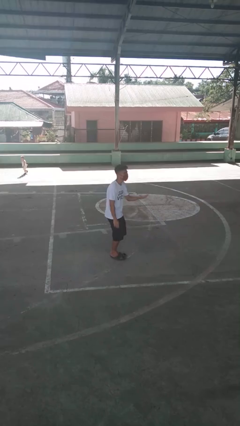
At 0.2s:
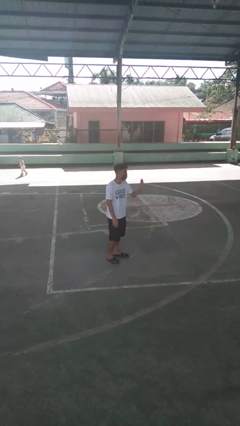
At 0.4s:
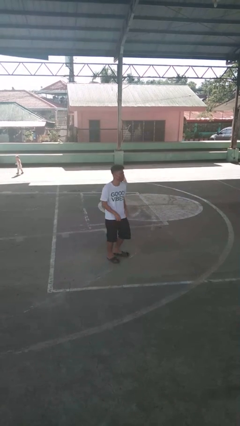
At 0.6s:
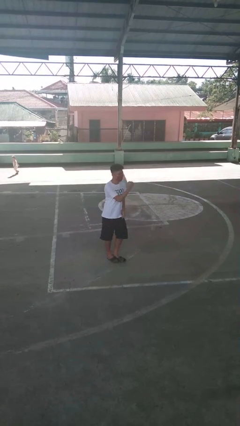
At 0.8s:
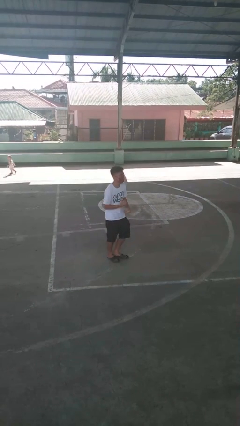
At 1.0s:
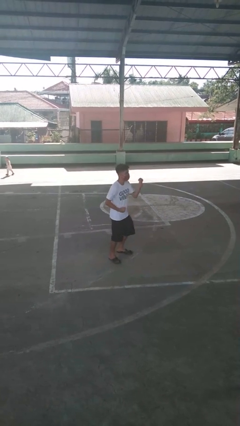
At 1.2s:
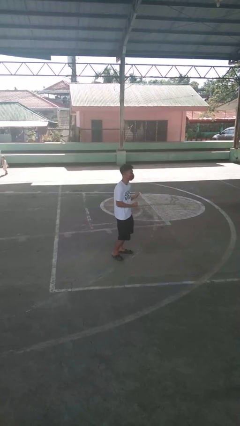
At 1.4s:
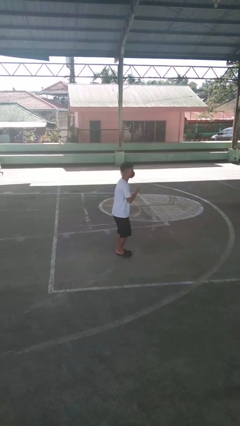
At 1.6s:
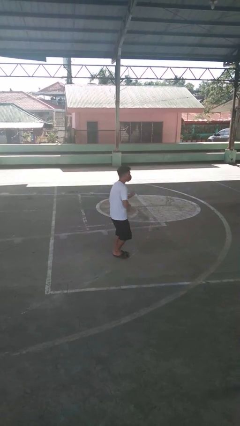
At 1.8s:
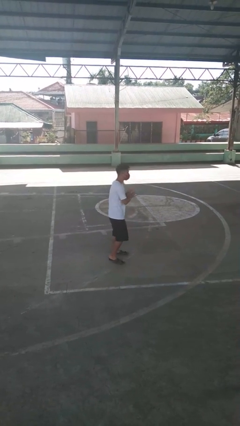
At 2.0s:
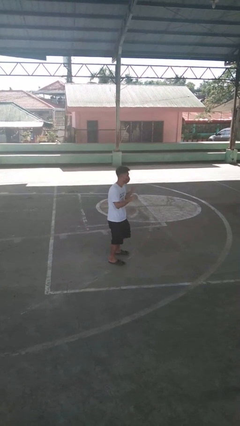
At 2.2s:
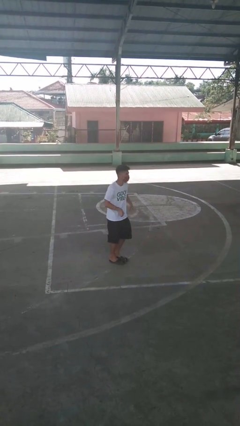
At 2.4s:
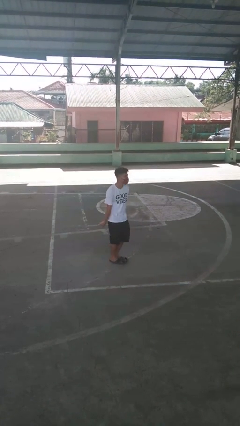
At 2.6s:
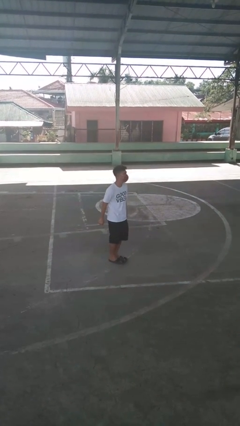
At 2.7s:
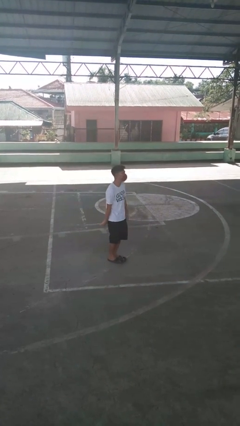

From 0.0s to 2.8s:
person dances in place

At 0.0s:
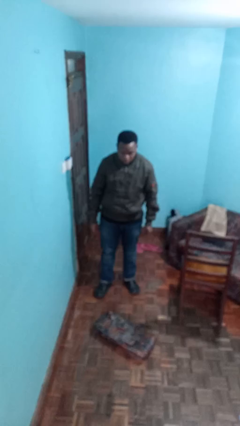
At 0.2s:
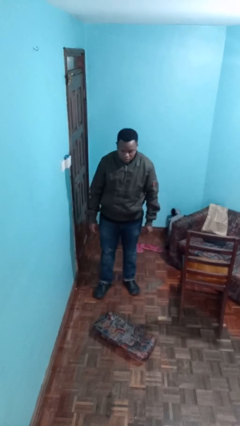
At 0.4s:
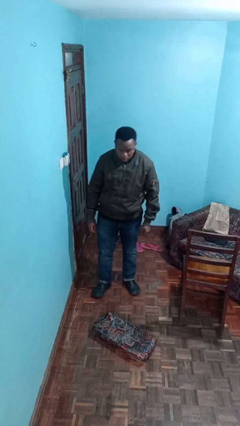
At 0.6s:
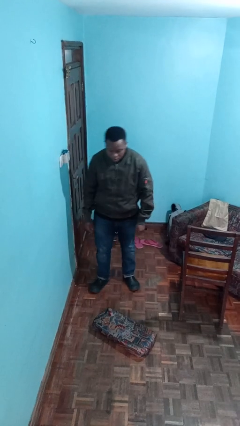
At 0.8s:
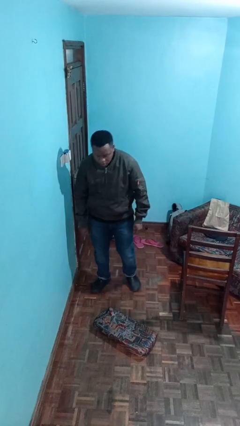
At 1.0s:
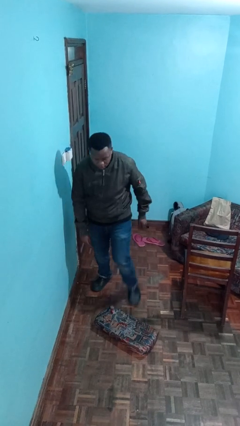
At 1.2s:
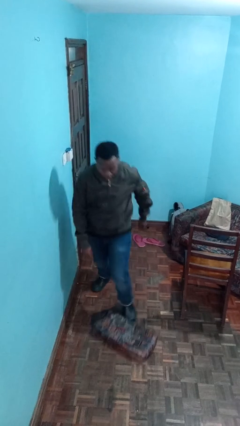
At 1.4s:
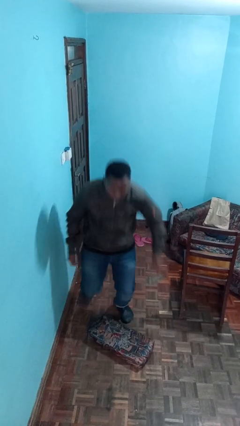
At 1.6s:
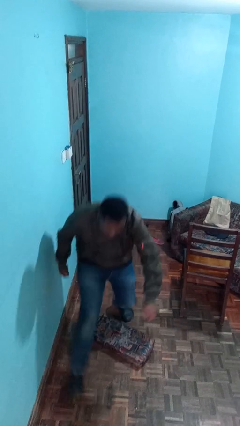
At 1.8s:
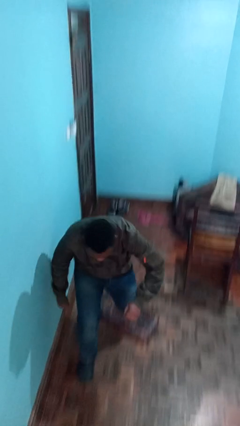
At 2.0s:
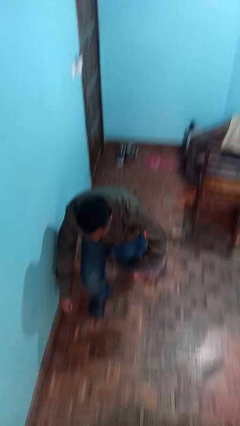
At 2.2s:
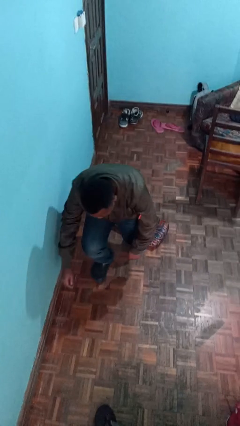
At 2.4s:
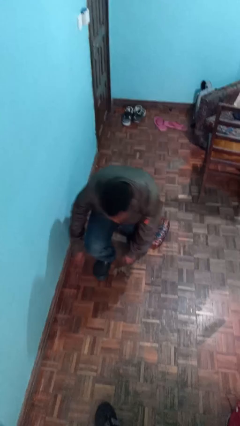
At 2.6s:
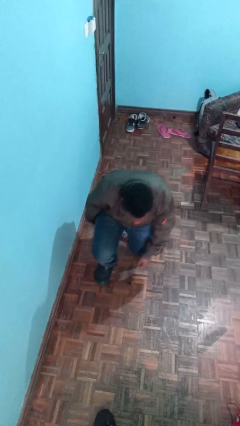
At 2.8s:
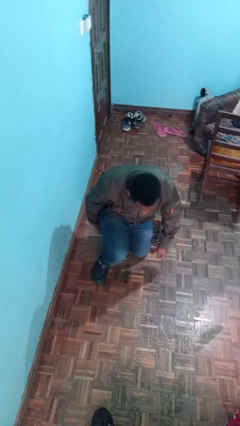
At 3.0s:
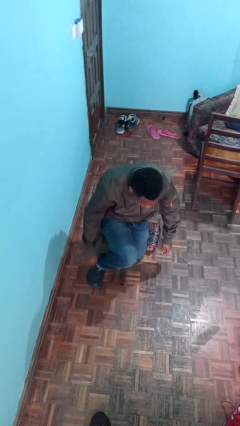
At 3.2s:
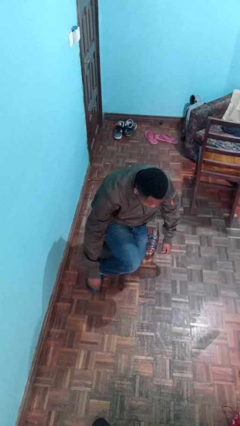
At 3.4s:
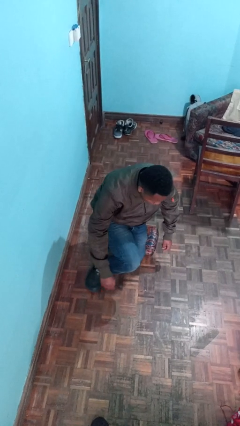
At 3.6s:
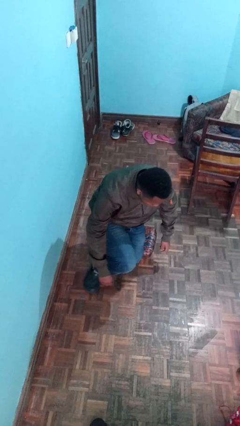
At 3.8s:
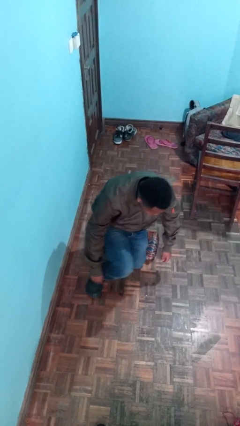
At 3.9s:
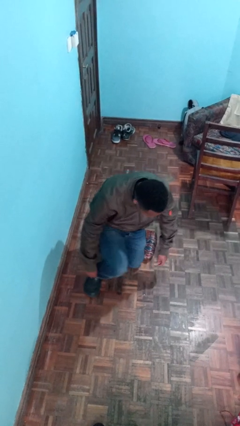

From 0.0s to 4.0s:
person trips on object on floor

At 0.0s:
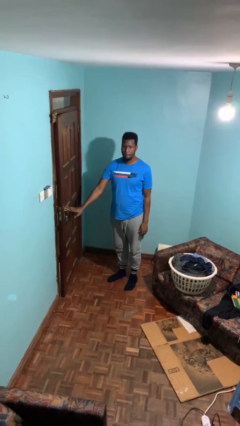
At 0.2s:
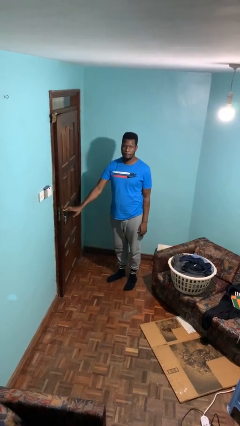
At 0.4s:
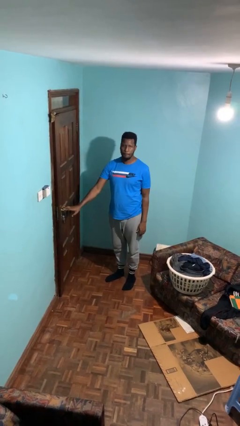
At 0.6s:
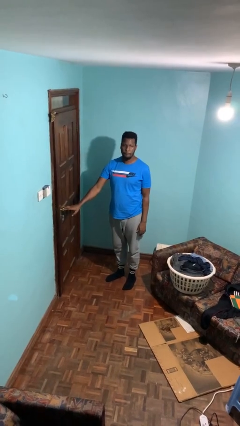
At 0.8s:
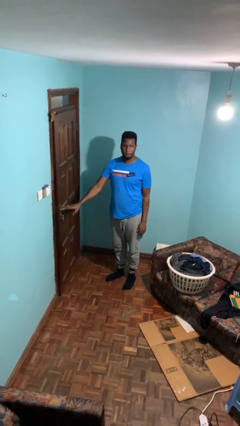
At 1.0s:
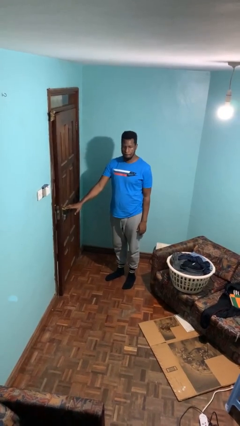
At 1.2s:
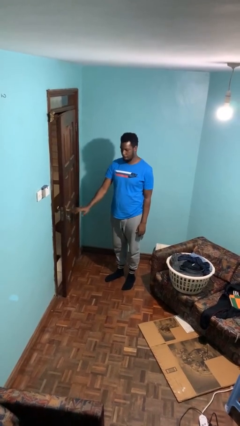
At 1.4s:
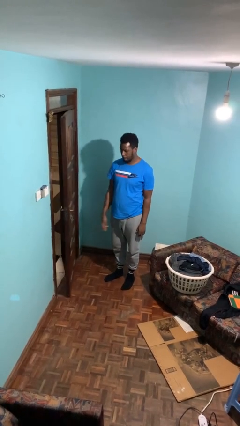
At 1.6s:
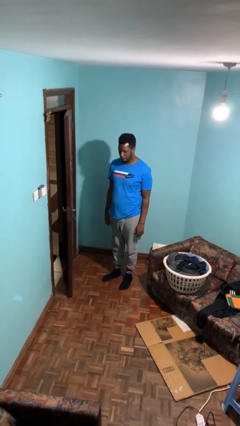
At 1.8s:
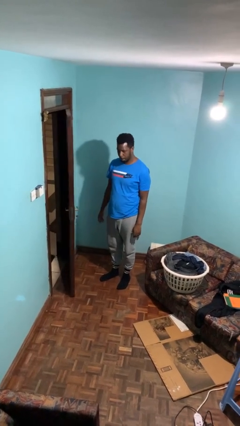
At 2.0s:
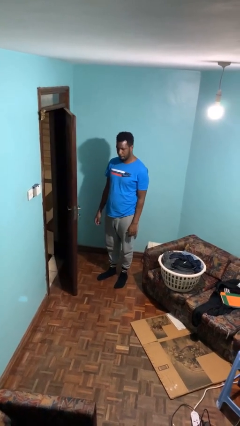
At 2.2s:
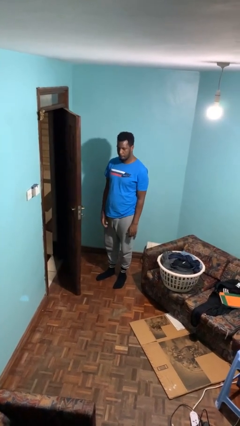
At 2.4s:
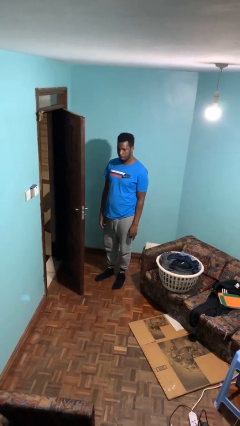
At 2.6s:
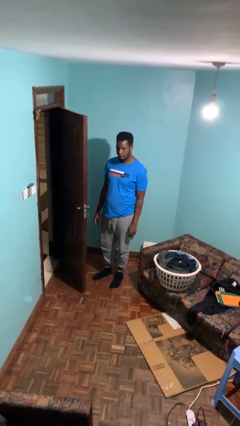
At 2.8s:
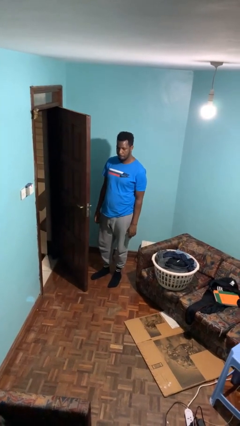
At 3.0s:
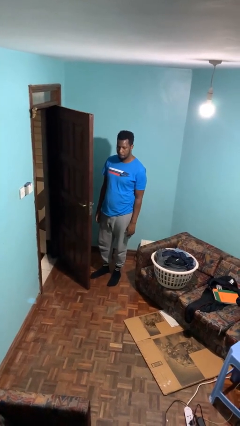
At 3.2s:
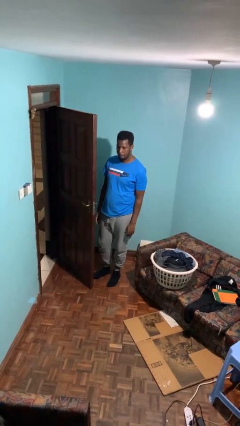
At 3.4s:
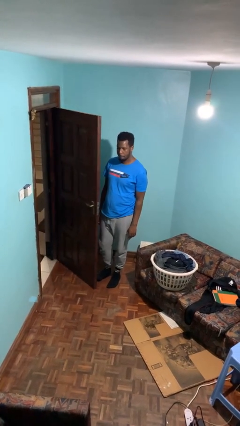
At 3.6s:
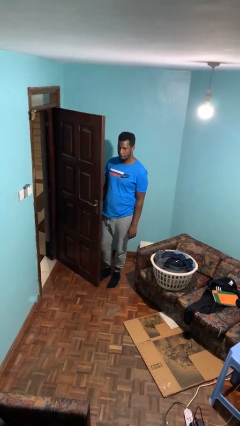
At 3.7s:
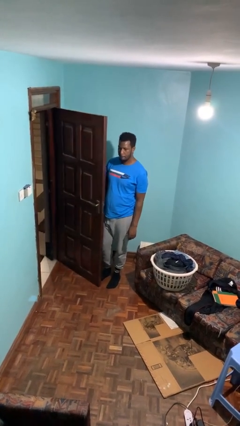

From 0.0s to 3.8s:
person opens facility door

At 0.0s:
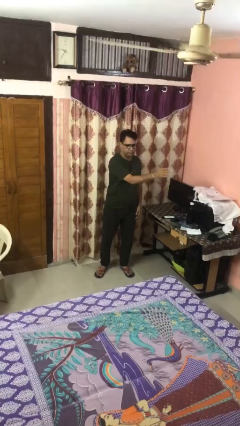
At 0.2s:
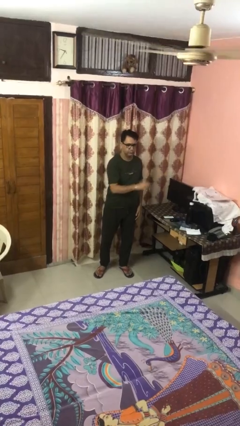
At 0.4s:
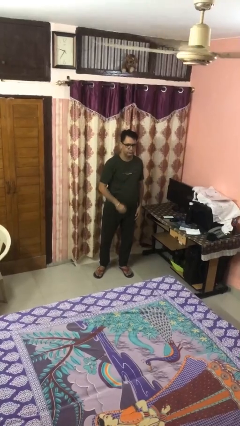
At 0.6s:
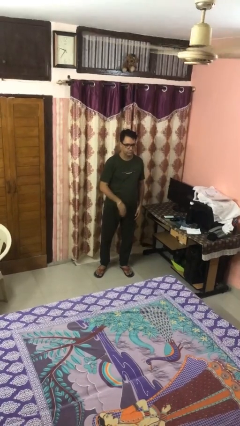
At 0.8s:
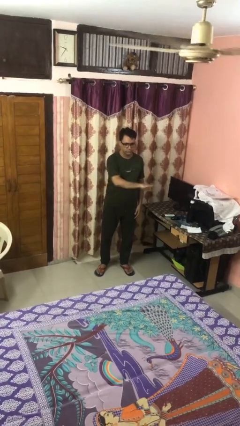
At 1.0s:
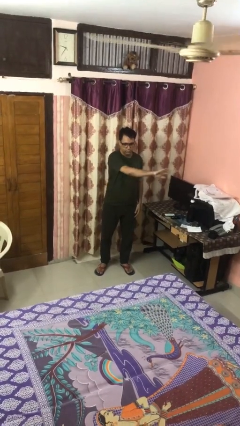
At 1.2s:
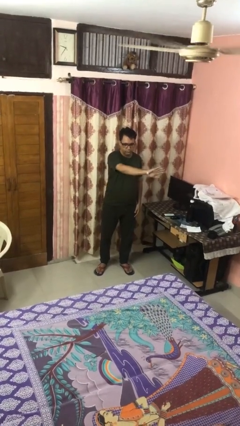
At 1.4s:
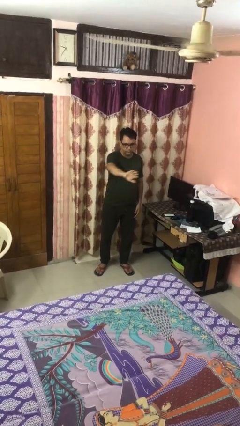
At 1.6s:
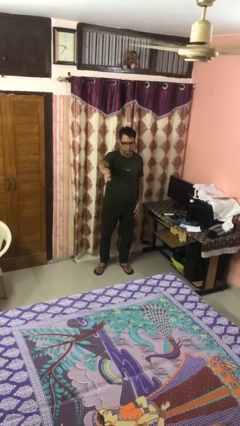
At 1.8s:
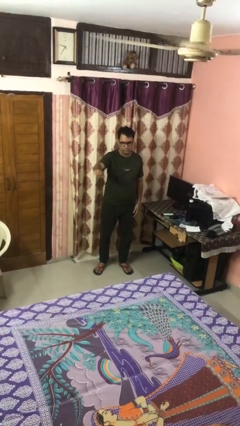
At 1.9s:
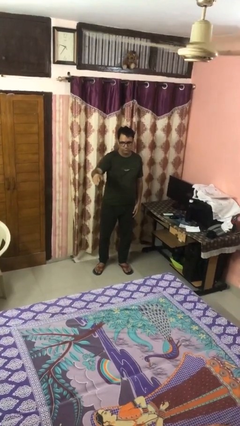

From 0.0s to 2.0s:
person gestures swipe right

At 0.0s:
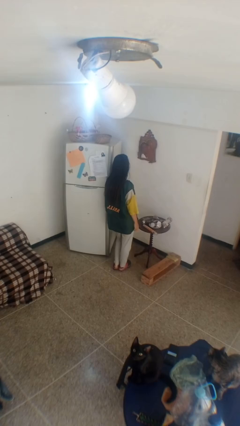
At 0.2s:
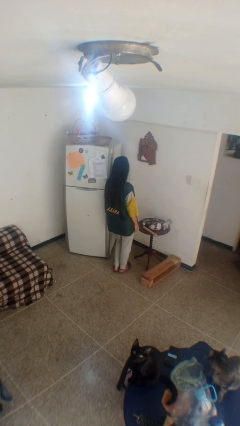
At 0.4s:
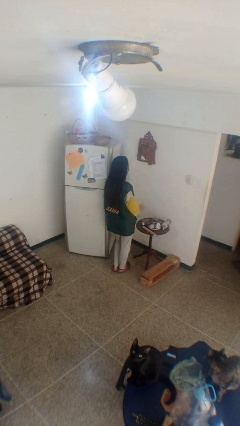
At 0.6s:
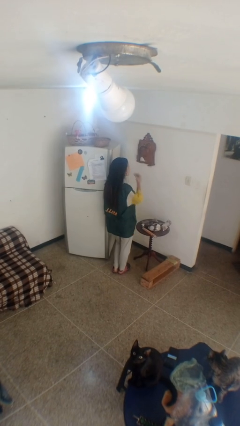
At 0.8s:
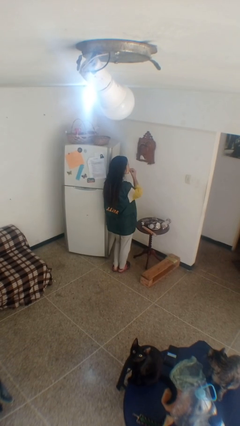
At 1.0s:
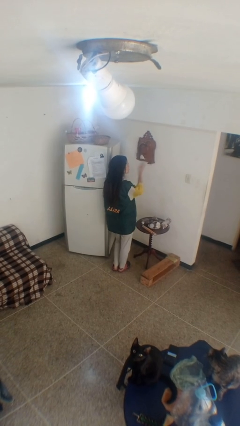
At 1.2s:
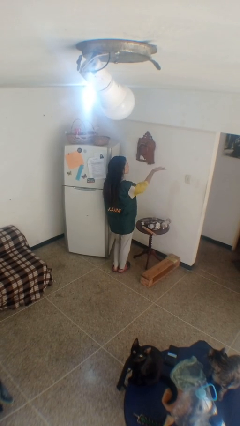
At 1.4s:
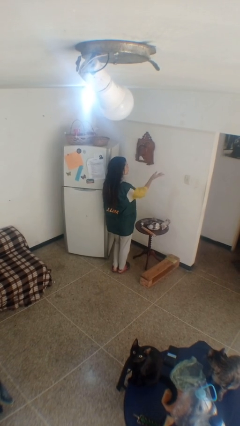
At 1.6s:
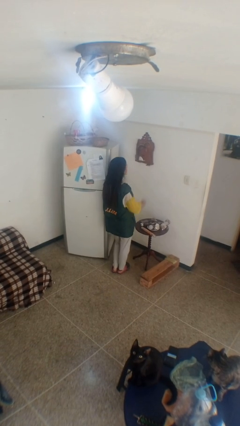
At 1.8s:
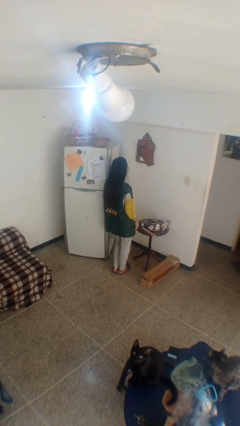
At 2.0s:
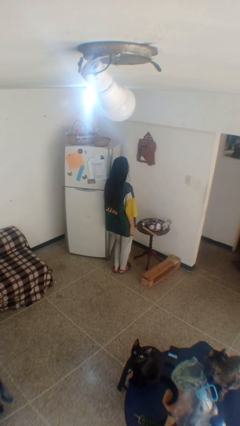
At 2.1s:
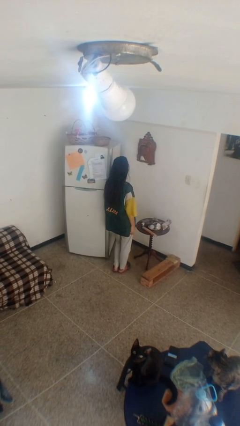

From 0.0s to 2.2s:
person gestures blow kiss

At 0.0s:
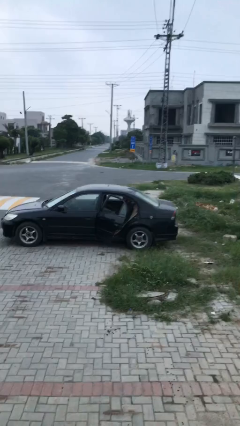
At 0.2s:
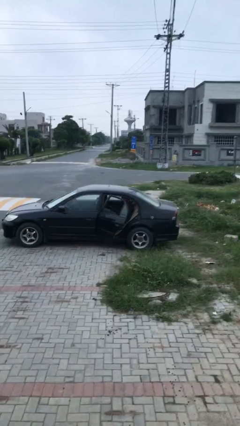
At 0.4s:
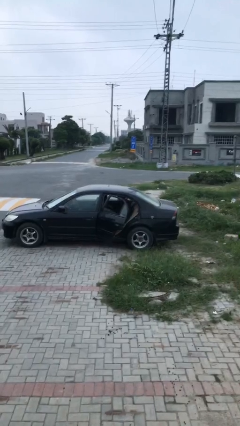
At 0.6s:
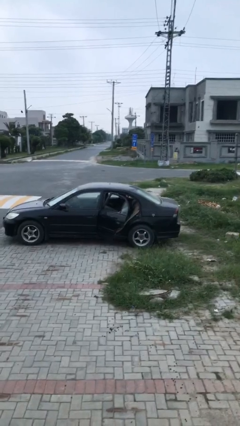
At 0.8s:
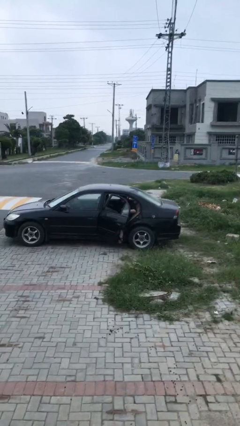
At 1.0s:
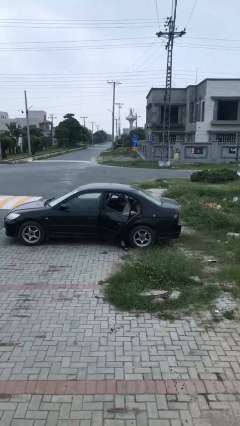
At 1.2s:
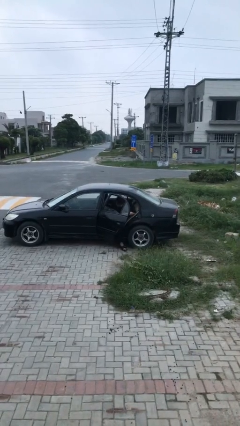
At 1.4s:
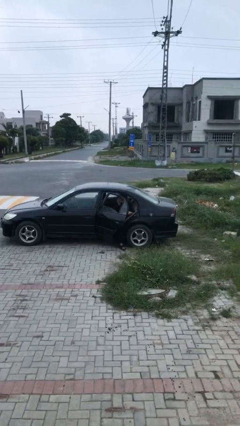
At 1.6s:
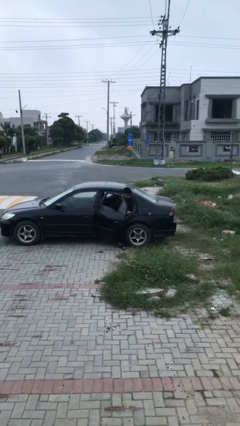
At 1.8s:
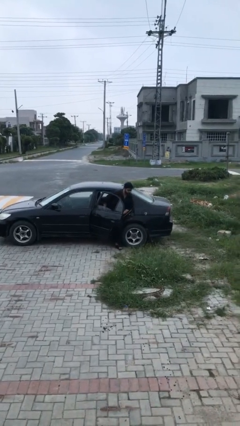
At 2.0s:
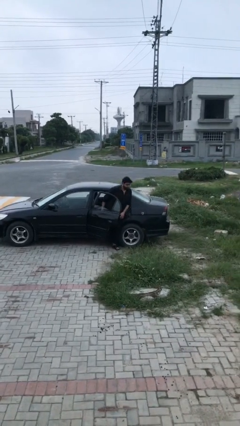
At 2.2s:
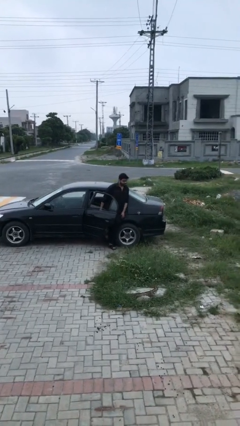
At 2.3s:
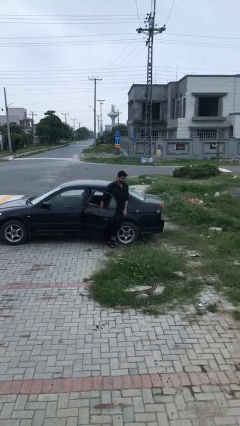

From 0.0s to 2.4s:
person exits car

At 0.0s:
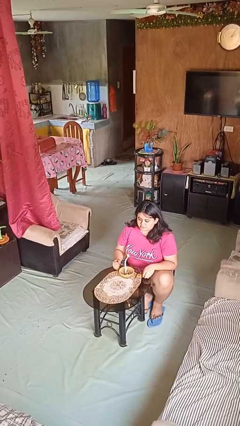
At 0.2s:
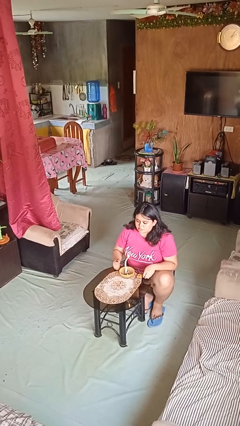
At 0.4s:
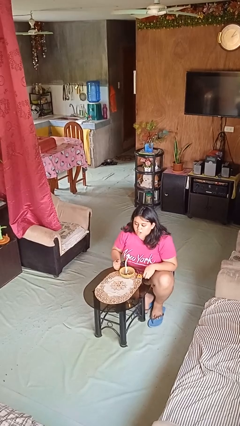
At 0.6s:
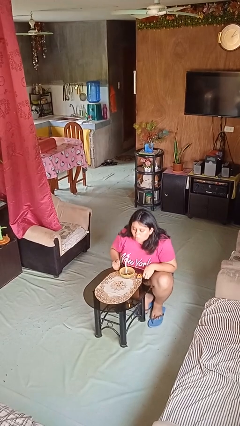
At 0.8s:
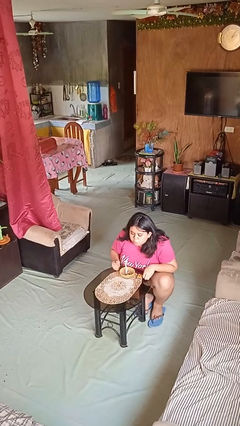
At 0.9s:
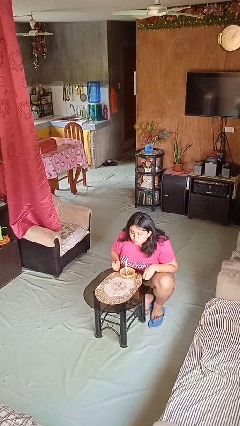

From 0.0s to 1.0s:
person extinguishes candle
